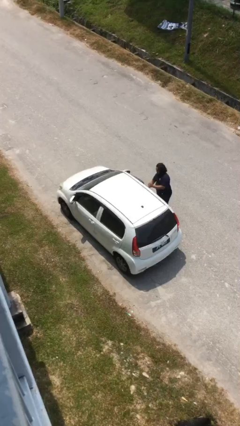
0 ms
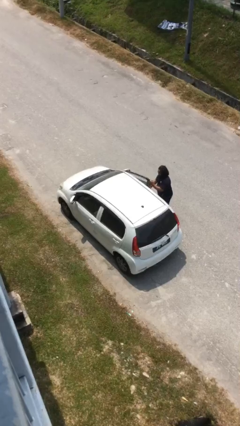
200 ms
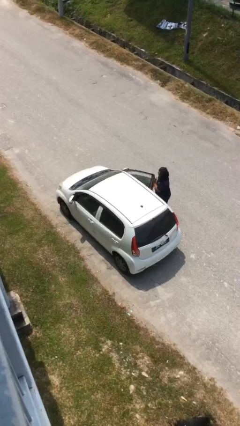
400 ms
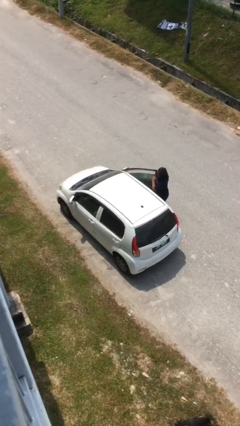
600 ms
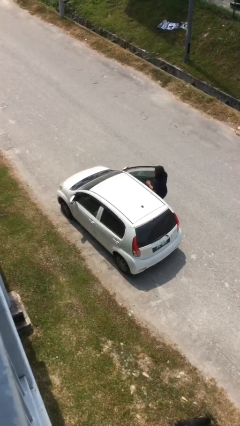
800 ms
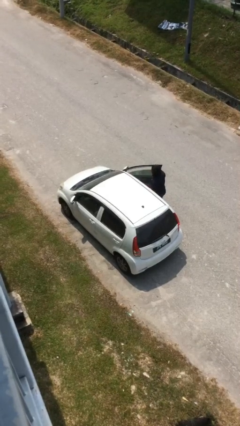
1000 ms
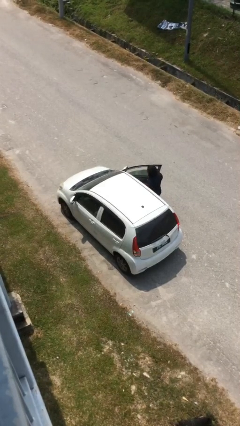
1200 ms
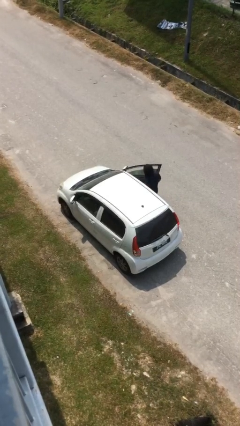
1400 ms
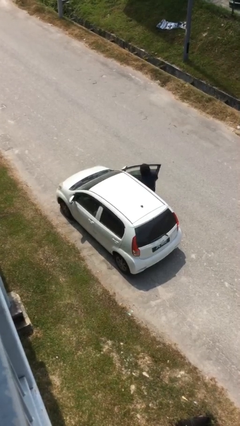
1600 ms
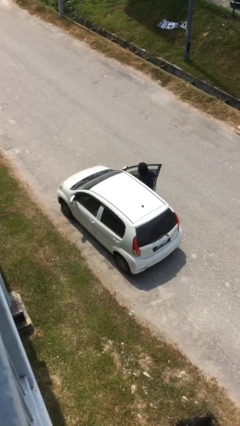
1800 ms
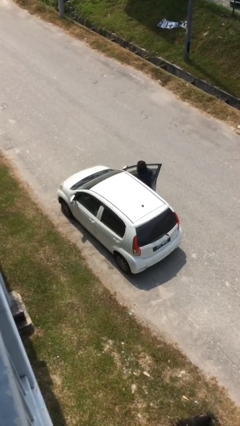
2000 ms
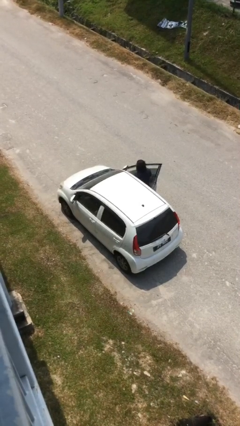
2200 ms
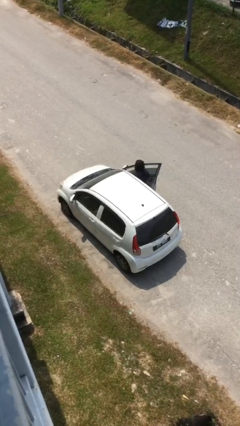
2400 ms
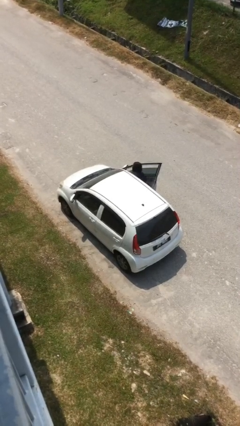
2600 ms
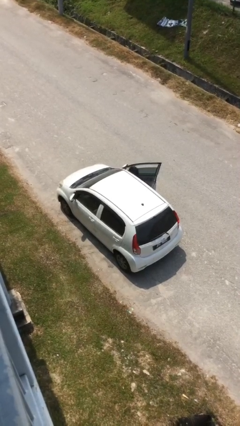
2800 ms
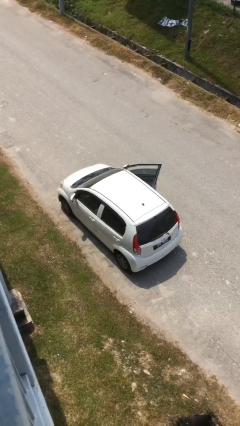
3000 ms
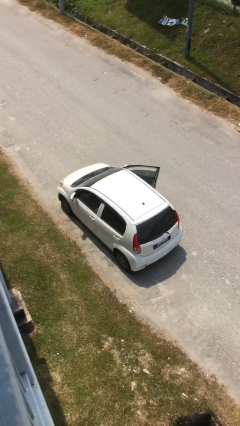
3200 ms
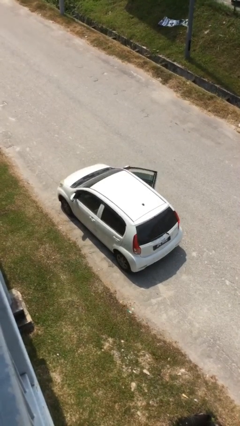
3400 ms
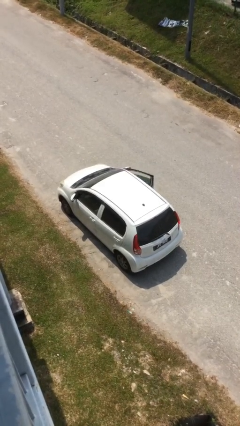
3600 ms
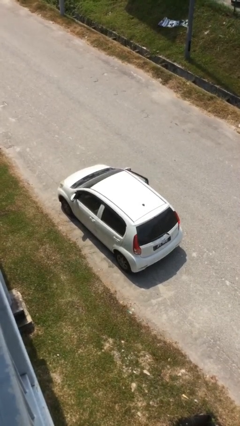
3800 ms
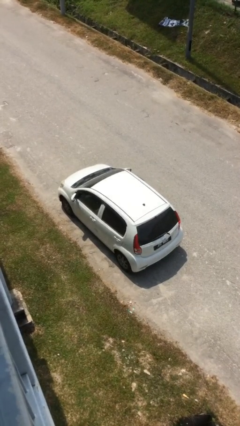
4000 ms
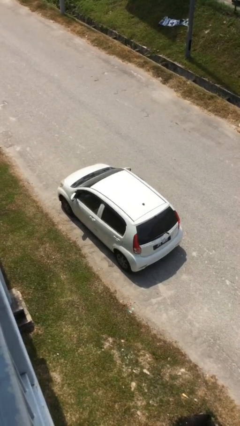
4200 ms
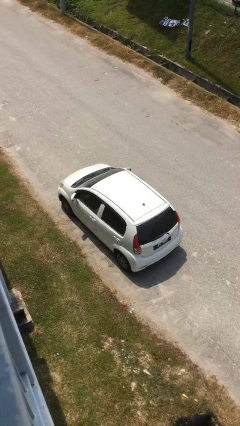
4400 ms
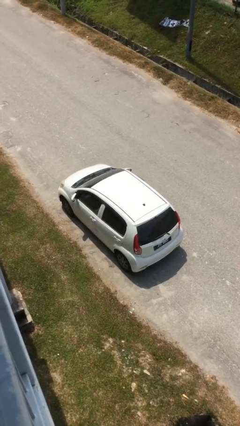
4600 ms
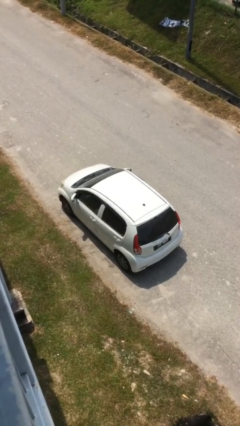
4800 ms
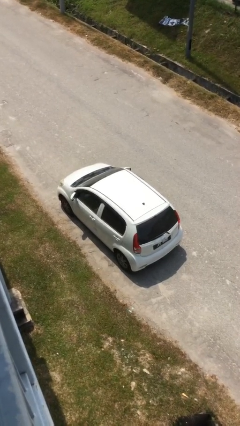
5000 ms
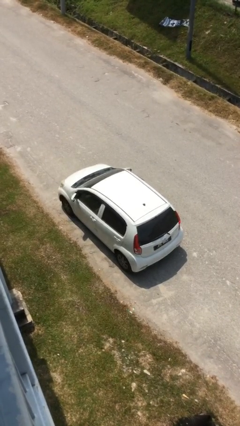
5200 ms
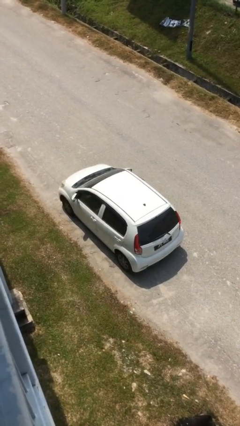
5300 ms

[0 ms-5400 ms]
car picks up person

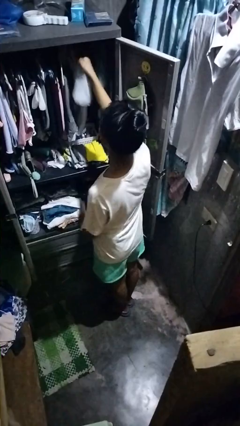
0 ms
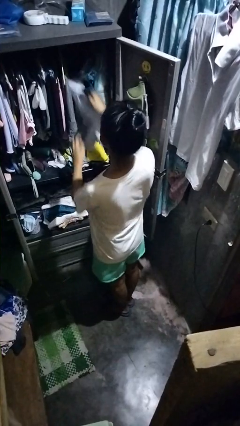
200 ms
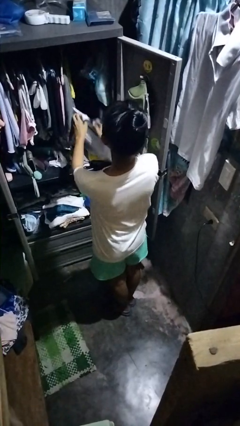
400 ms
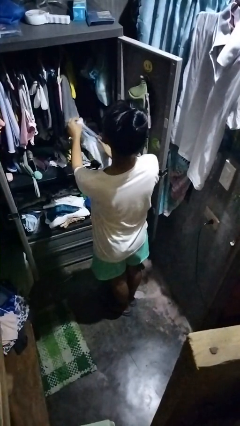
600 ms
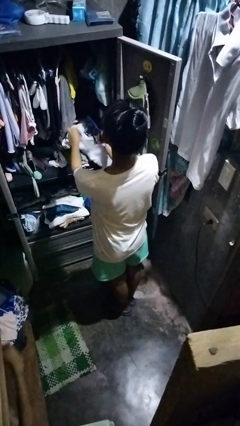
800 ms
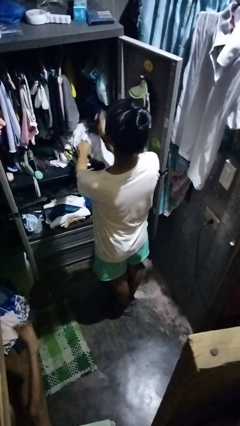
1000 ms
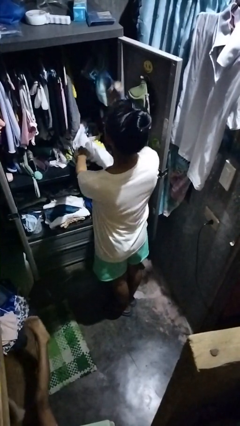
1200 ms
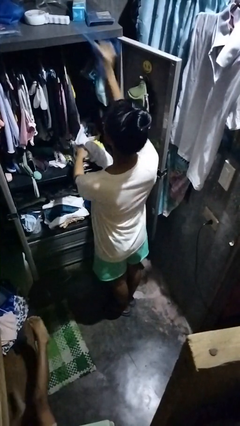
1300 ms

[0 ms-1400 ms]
person takes clothes from closet

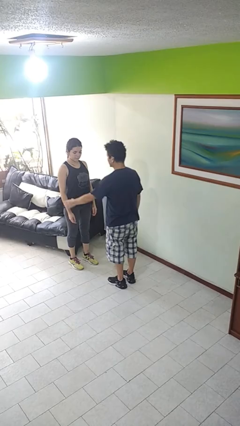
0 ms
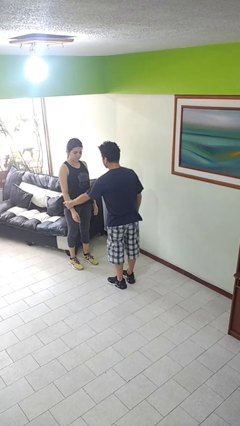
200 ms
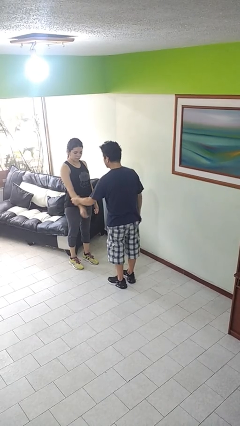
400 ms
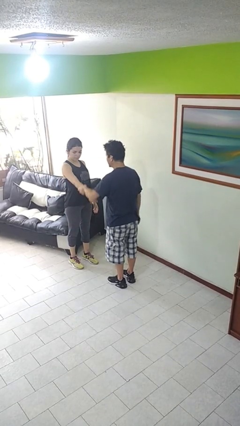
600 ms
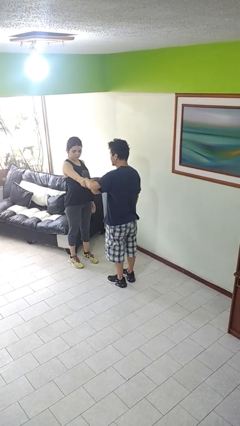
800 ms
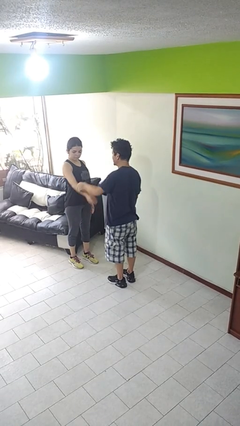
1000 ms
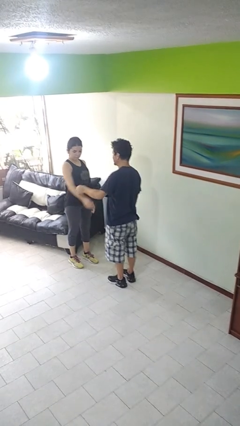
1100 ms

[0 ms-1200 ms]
person grabs person by forearm

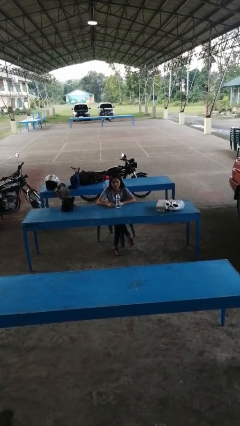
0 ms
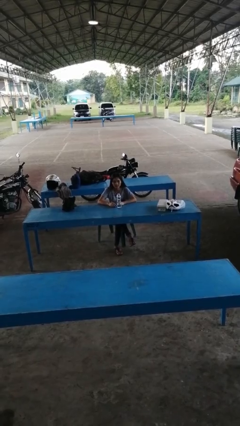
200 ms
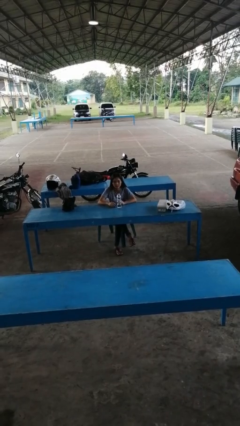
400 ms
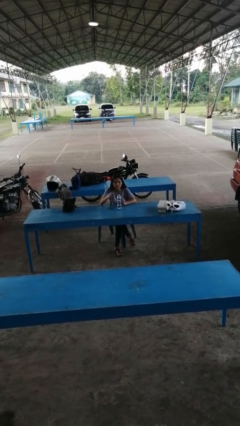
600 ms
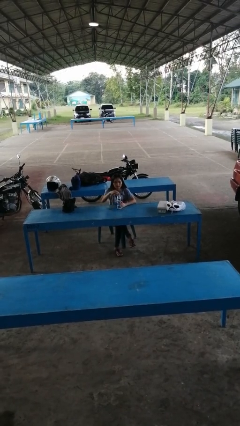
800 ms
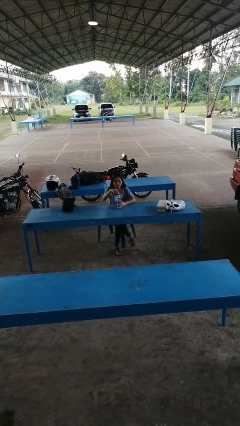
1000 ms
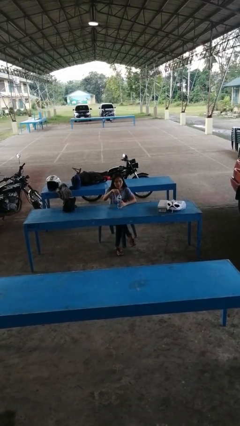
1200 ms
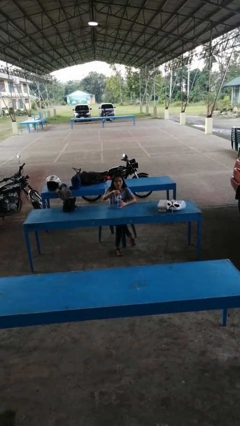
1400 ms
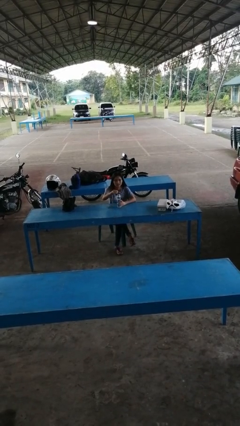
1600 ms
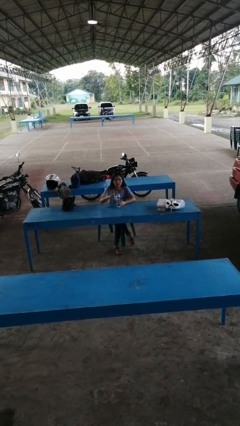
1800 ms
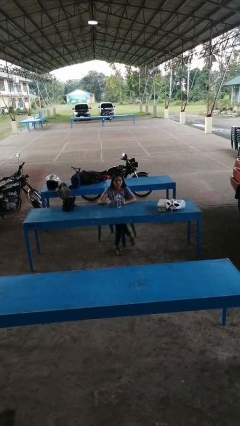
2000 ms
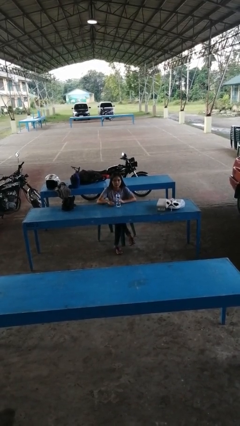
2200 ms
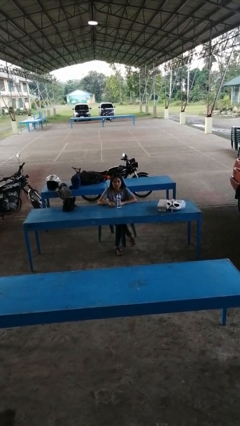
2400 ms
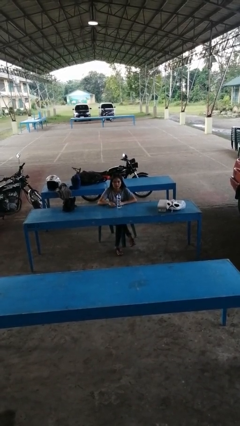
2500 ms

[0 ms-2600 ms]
person screws lid to bottle

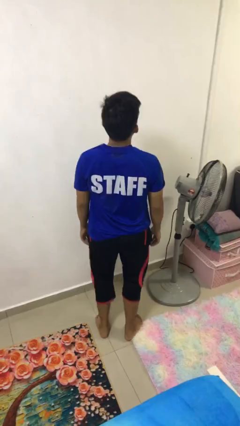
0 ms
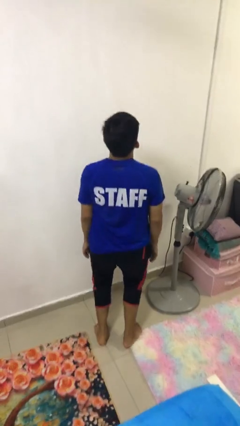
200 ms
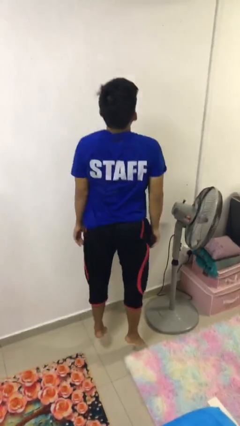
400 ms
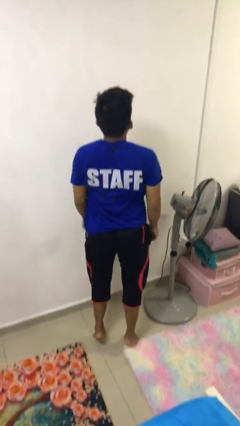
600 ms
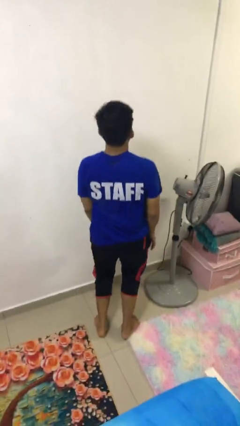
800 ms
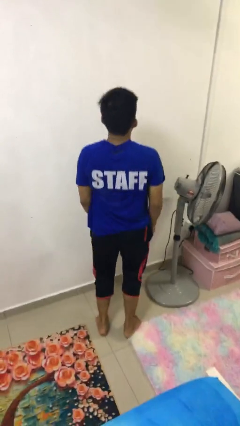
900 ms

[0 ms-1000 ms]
person jumps

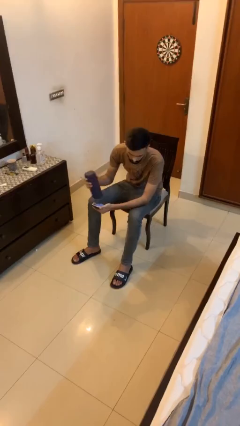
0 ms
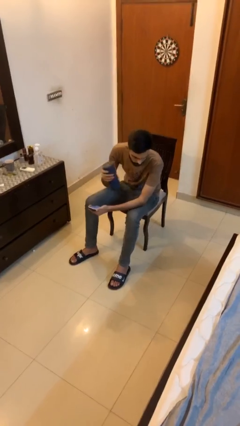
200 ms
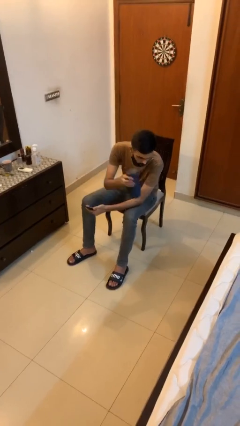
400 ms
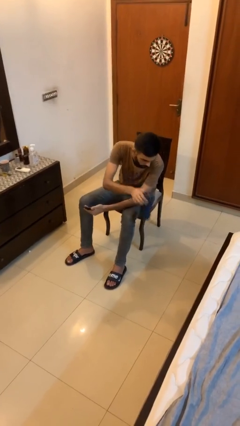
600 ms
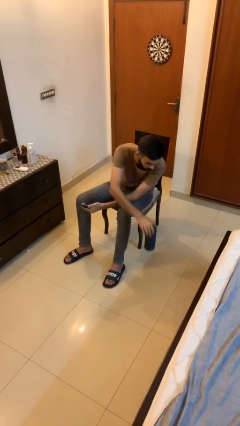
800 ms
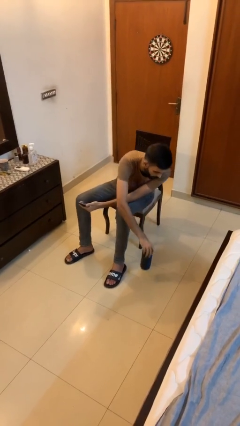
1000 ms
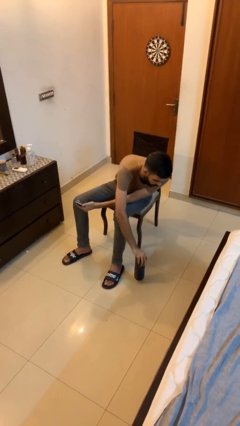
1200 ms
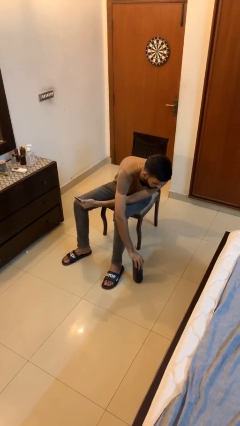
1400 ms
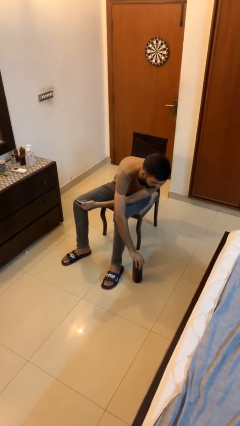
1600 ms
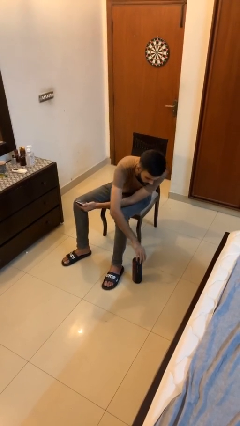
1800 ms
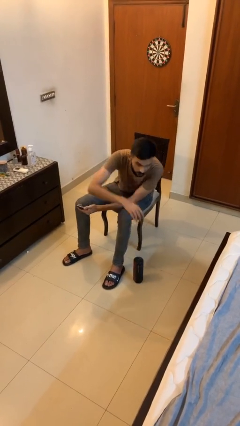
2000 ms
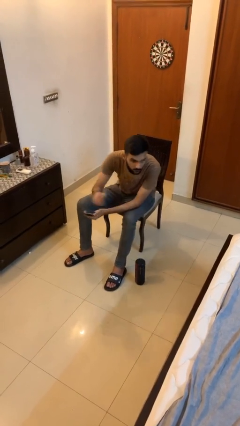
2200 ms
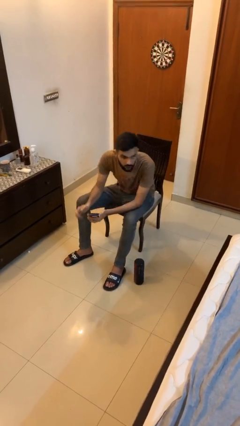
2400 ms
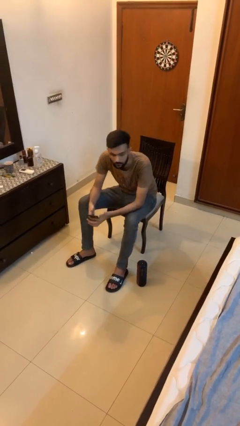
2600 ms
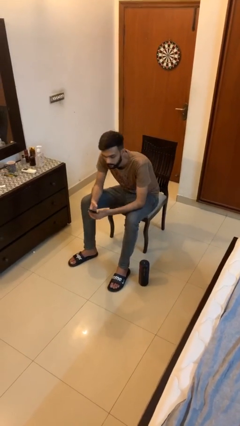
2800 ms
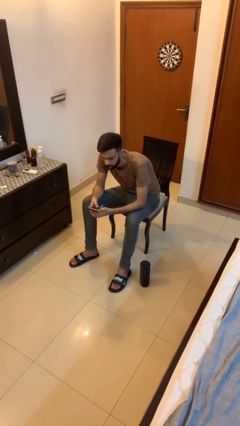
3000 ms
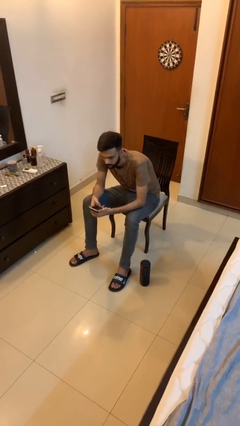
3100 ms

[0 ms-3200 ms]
person puts down object on floor

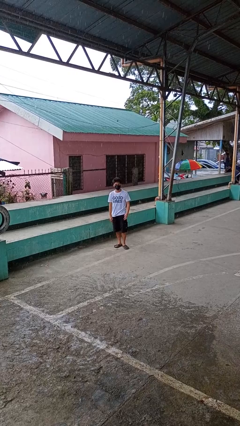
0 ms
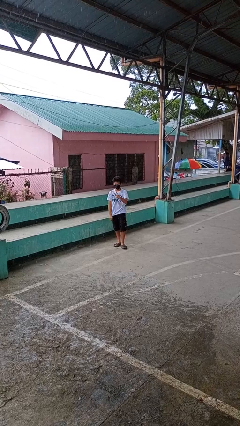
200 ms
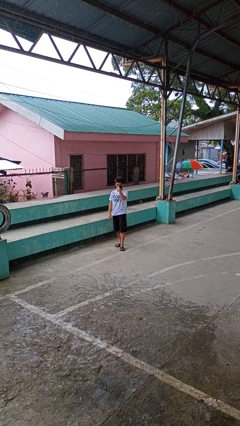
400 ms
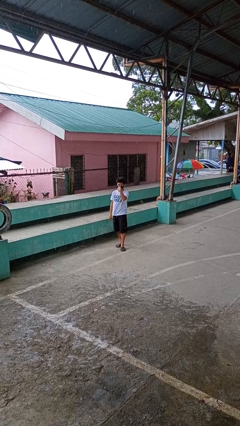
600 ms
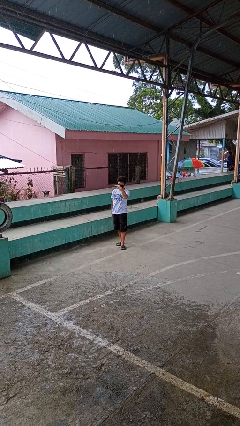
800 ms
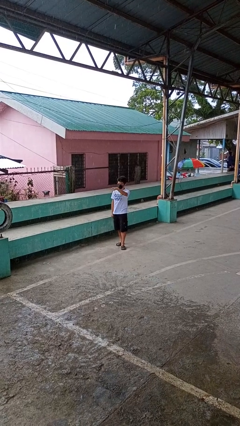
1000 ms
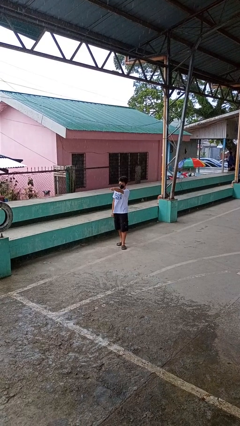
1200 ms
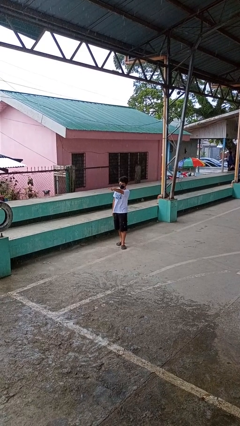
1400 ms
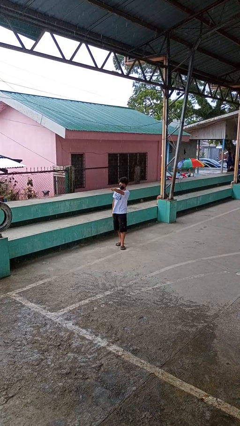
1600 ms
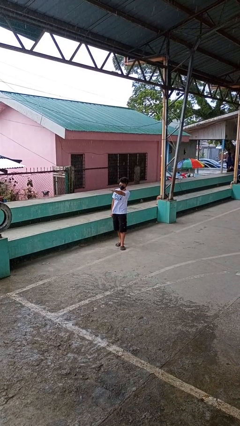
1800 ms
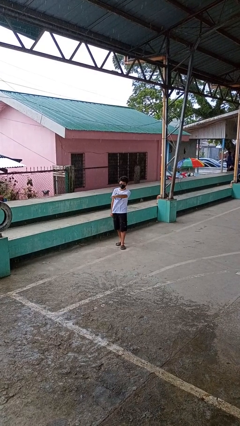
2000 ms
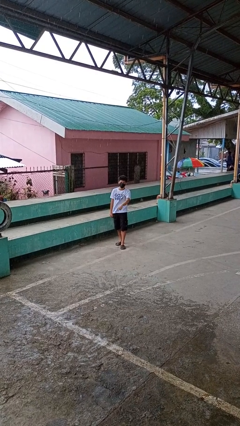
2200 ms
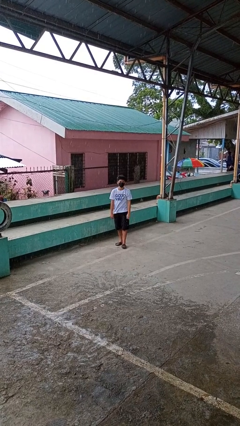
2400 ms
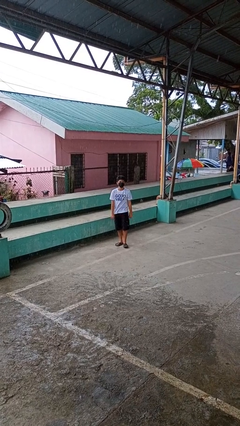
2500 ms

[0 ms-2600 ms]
person gestures watch closely
